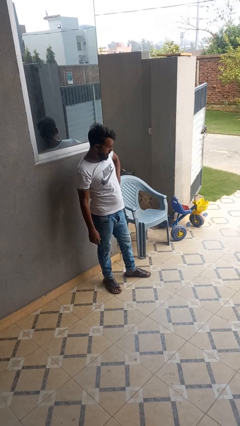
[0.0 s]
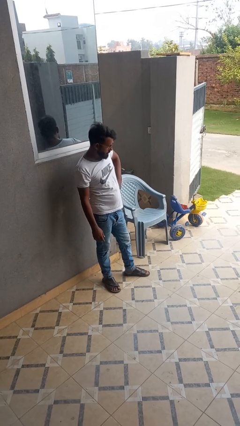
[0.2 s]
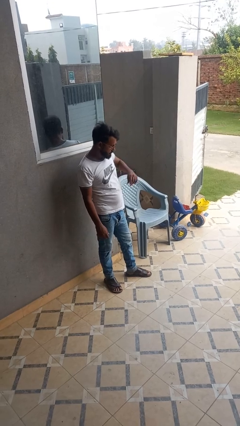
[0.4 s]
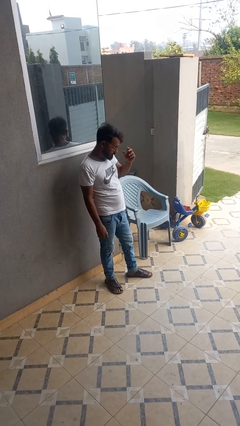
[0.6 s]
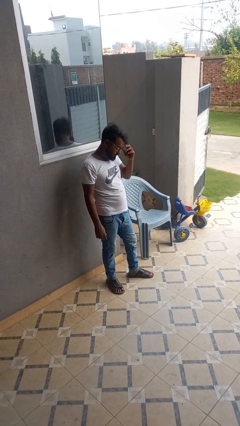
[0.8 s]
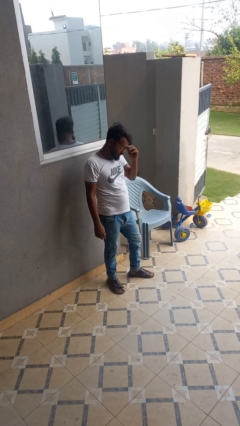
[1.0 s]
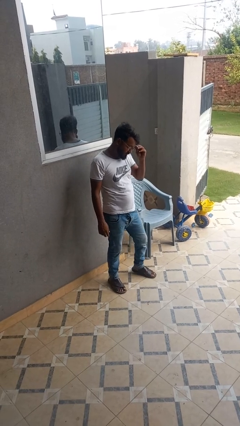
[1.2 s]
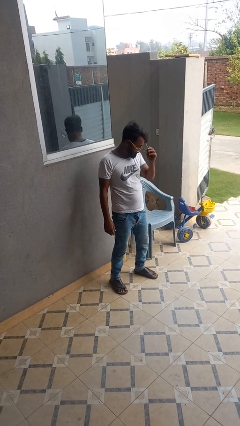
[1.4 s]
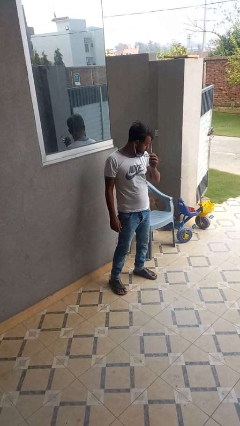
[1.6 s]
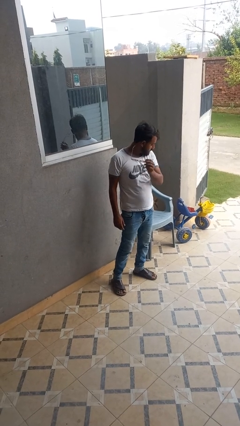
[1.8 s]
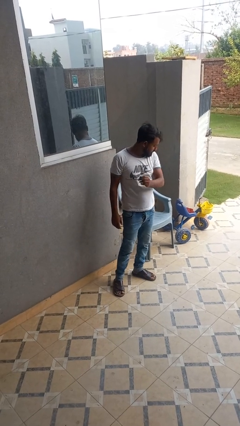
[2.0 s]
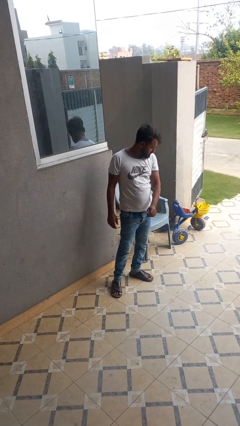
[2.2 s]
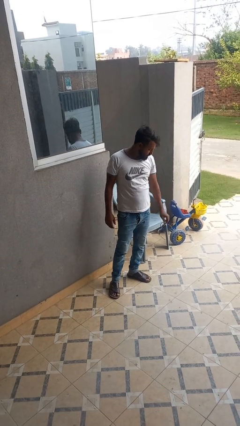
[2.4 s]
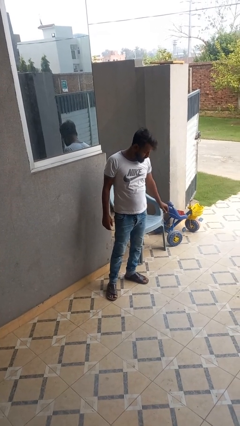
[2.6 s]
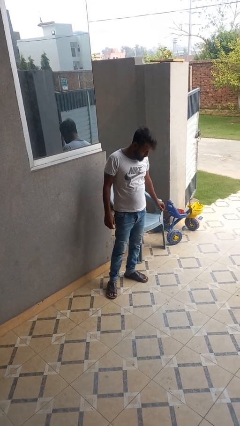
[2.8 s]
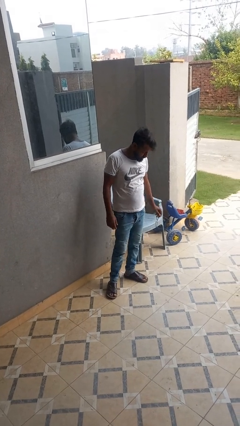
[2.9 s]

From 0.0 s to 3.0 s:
person takes off glasses

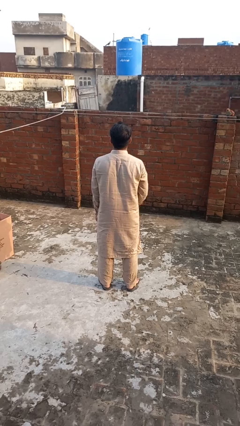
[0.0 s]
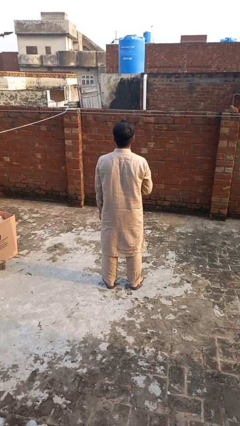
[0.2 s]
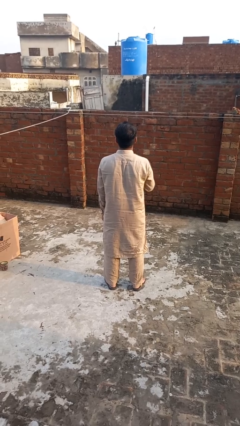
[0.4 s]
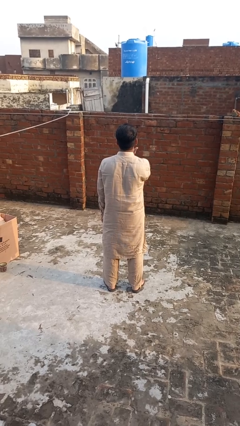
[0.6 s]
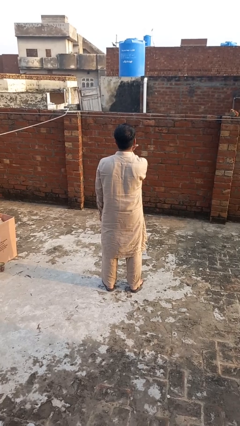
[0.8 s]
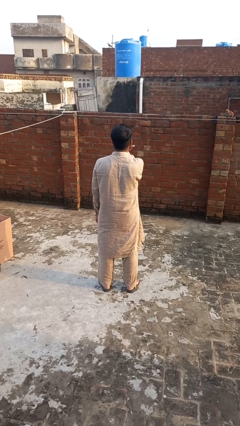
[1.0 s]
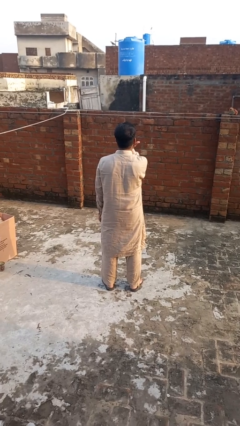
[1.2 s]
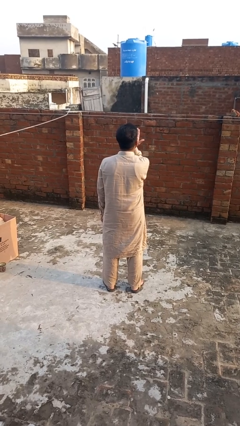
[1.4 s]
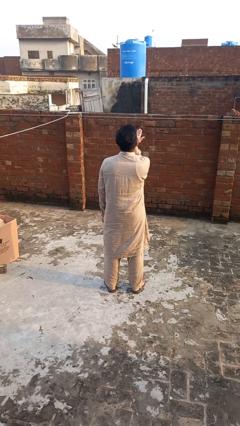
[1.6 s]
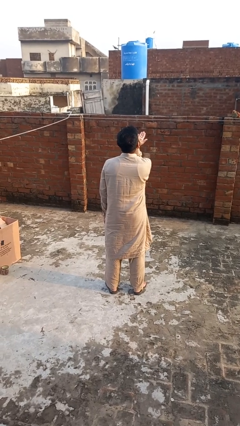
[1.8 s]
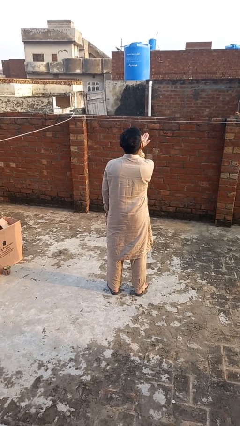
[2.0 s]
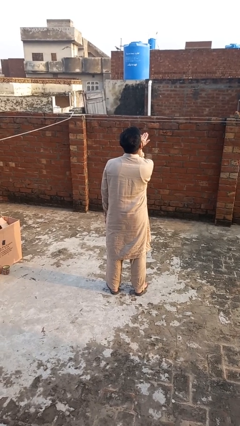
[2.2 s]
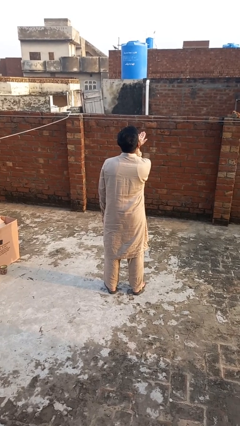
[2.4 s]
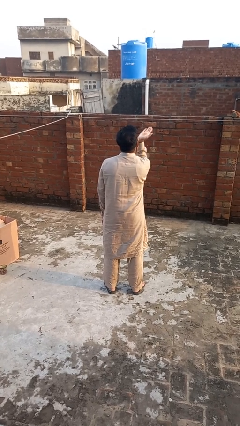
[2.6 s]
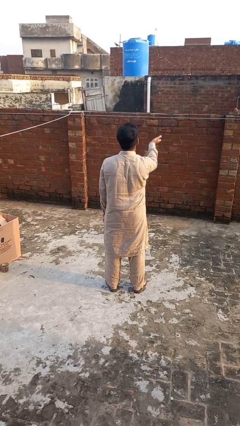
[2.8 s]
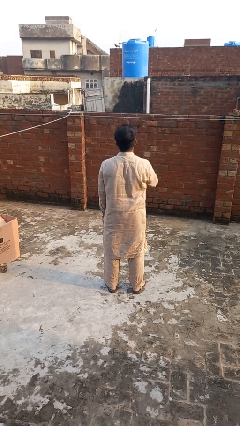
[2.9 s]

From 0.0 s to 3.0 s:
person gestures blow kiss

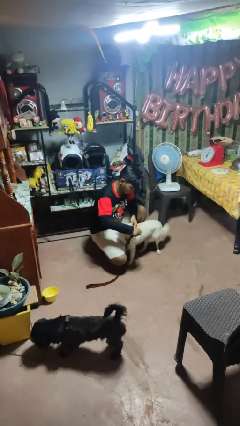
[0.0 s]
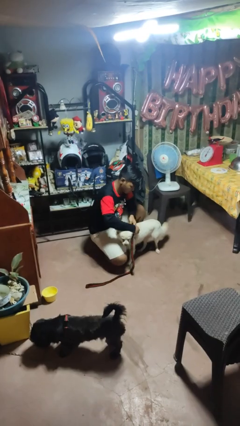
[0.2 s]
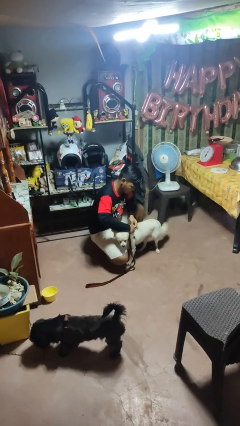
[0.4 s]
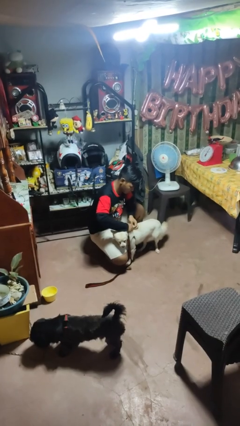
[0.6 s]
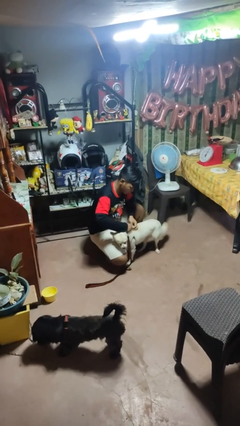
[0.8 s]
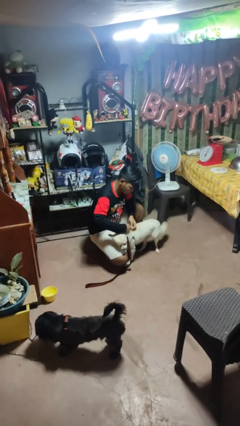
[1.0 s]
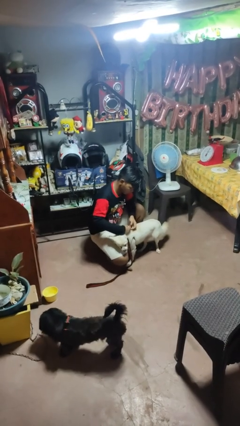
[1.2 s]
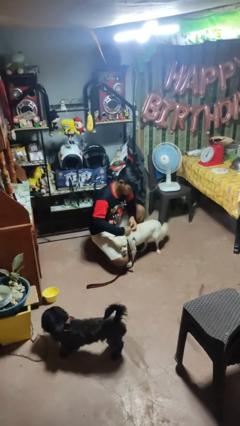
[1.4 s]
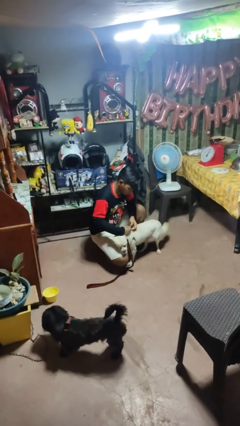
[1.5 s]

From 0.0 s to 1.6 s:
person attaches leash to dog

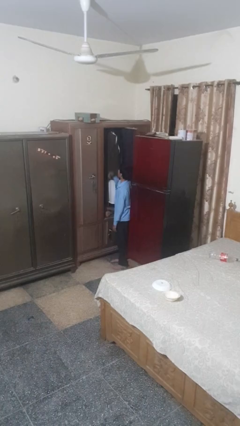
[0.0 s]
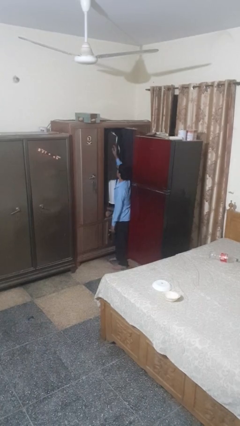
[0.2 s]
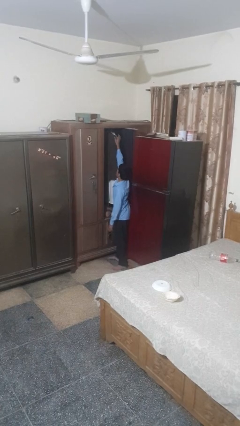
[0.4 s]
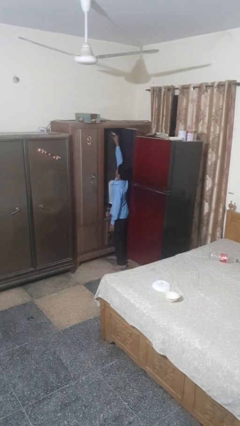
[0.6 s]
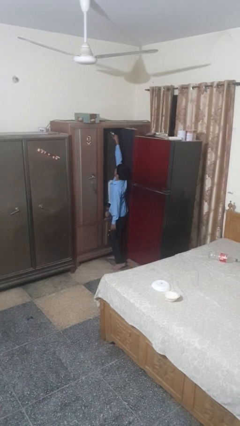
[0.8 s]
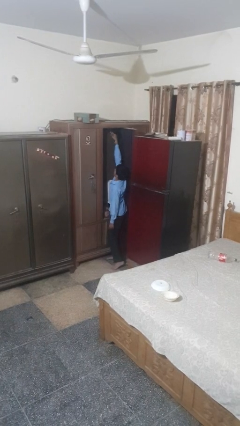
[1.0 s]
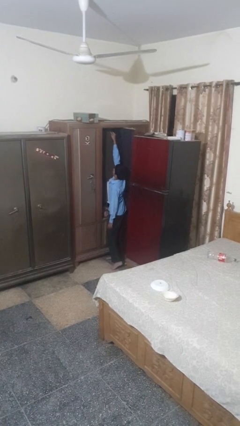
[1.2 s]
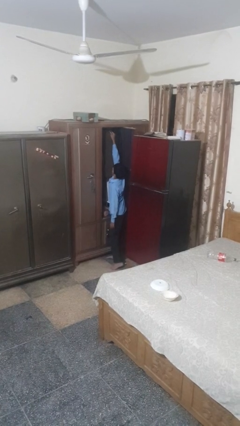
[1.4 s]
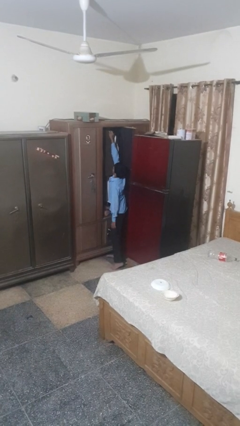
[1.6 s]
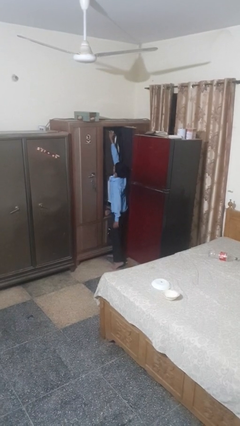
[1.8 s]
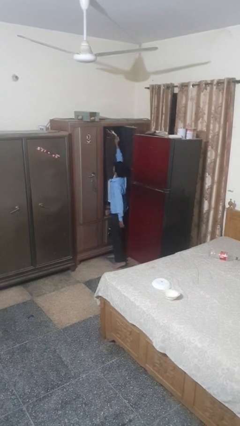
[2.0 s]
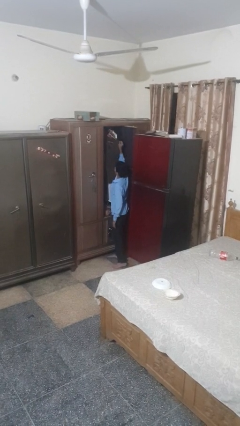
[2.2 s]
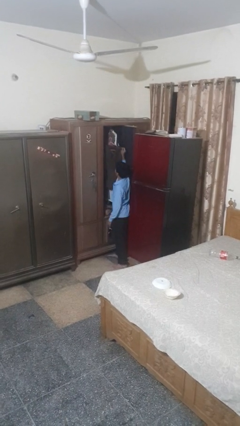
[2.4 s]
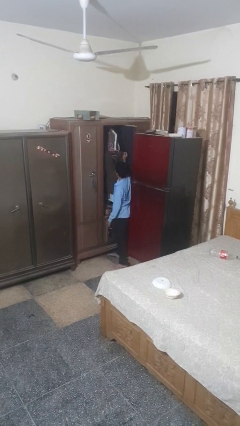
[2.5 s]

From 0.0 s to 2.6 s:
person takes clothes from closet

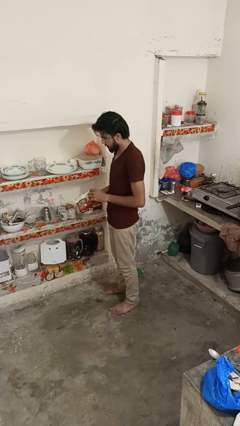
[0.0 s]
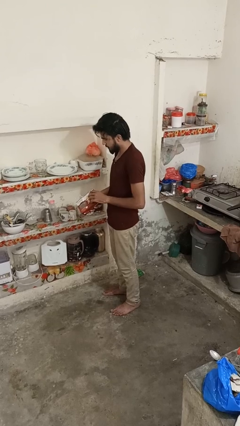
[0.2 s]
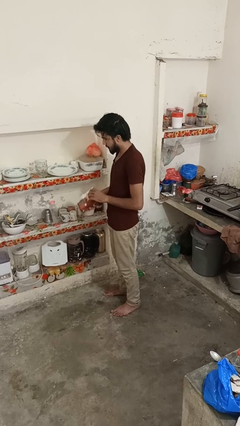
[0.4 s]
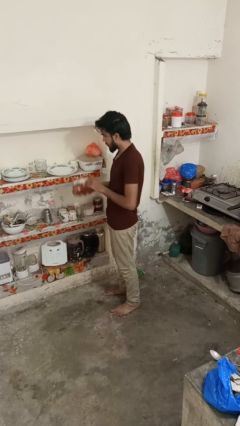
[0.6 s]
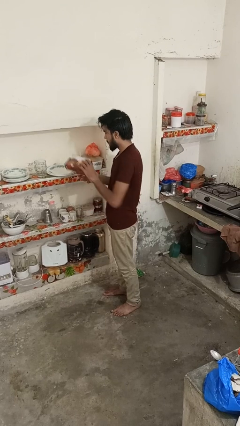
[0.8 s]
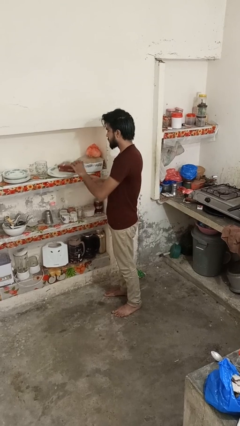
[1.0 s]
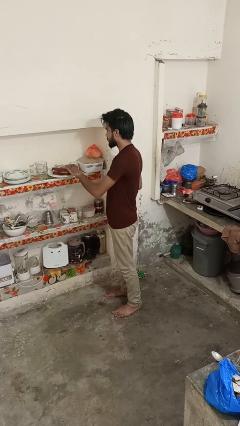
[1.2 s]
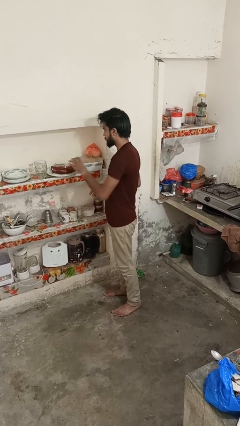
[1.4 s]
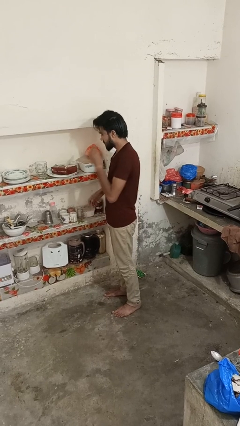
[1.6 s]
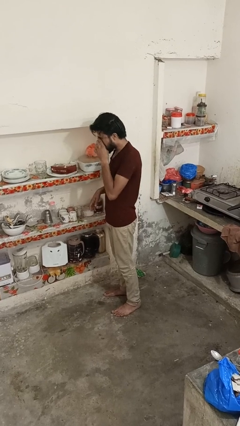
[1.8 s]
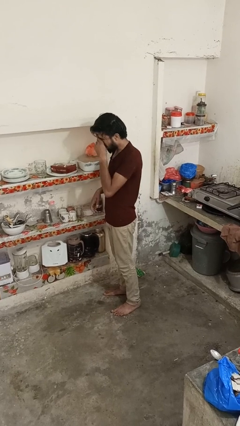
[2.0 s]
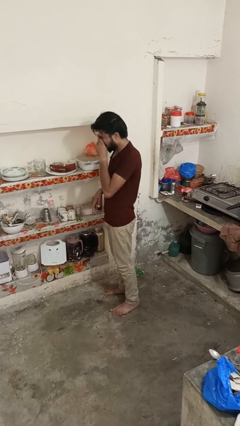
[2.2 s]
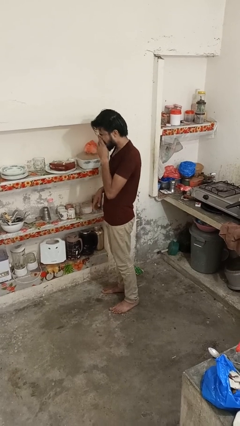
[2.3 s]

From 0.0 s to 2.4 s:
person puts down object into cabinet

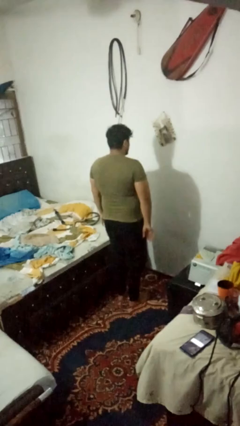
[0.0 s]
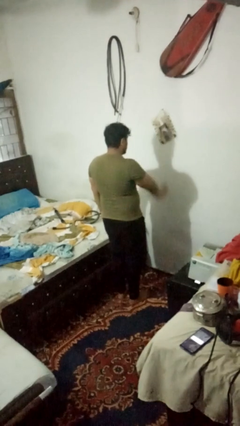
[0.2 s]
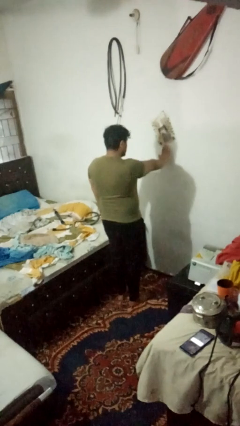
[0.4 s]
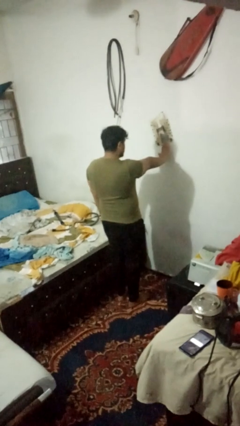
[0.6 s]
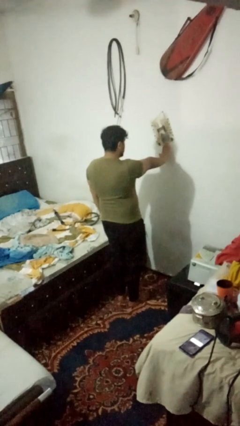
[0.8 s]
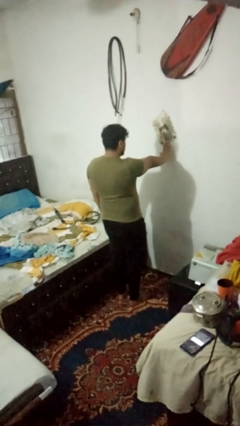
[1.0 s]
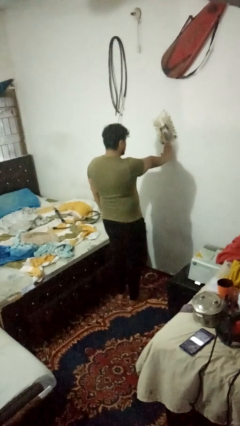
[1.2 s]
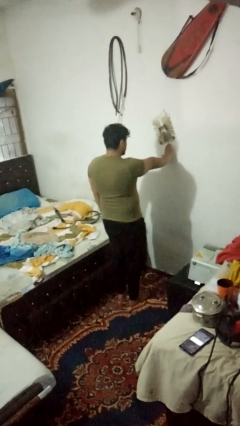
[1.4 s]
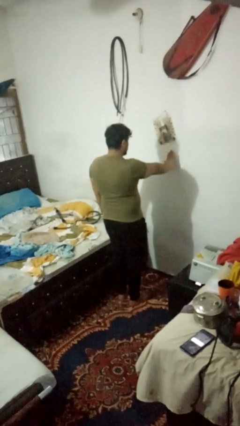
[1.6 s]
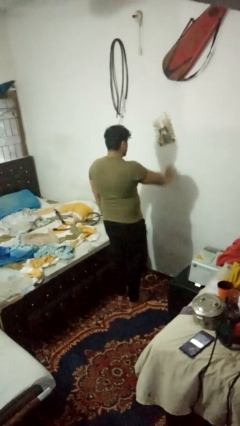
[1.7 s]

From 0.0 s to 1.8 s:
person gestures stop

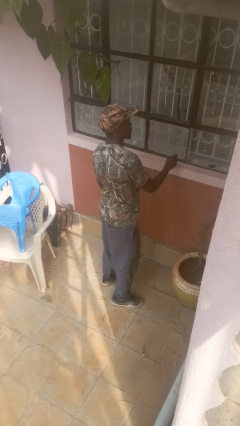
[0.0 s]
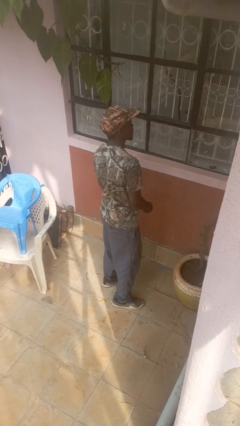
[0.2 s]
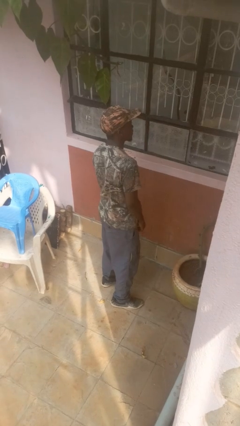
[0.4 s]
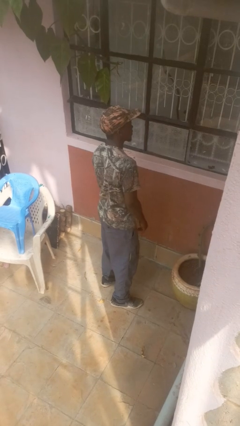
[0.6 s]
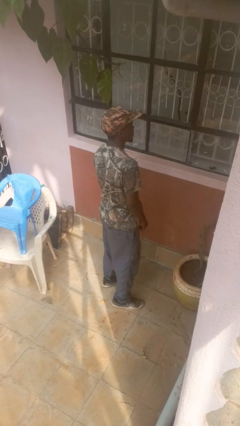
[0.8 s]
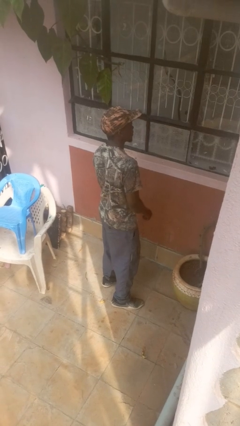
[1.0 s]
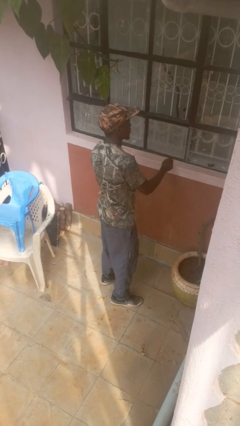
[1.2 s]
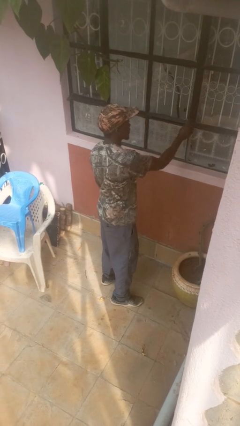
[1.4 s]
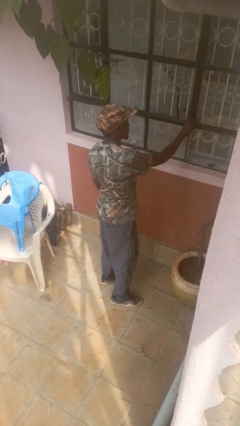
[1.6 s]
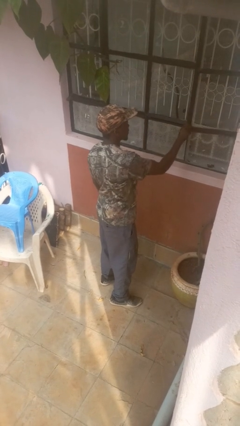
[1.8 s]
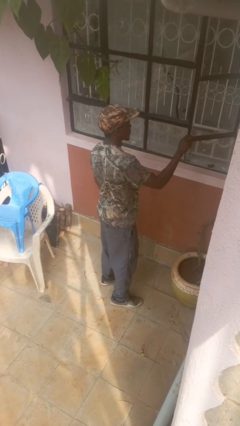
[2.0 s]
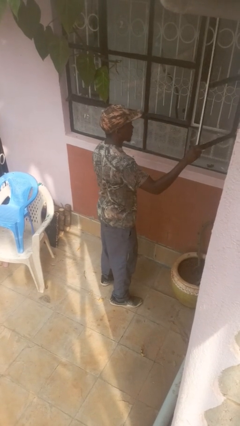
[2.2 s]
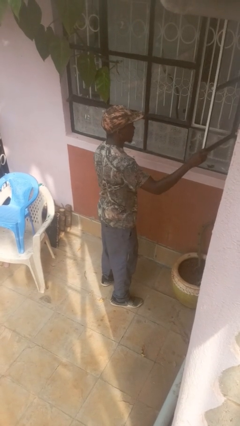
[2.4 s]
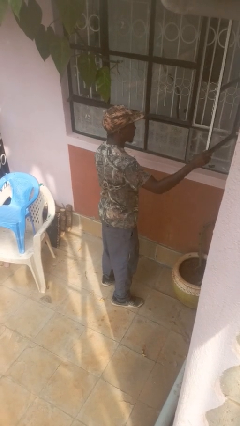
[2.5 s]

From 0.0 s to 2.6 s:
person opens home window
